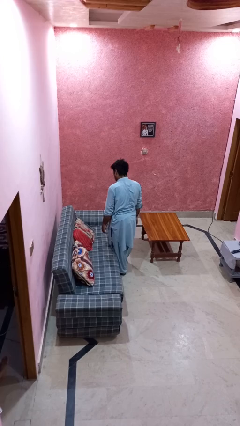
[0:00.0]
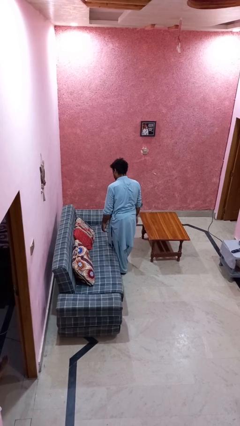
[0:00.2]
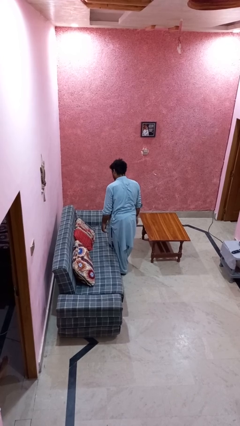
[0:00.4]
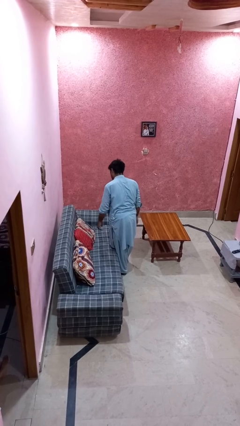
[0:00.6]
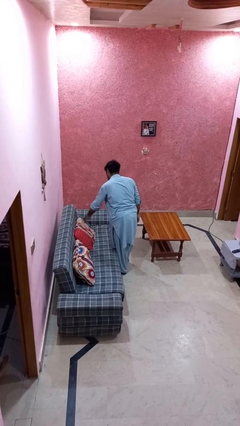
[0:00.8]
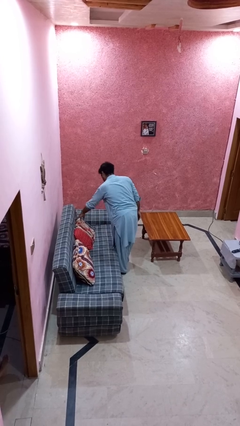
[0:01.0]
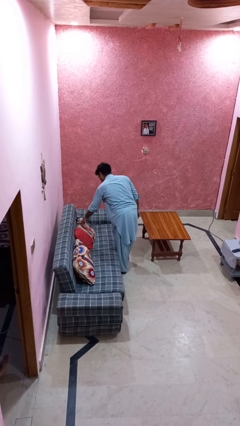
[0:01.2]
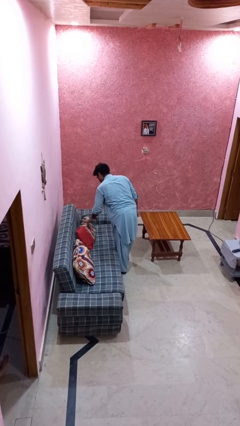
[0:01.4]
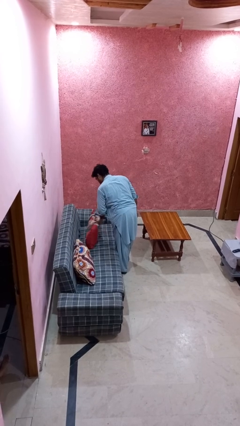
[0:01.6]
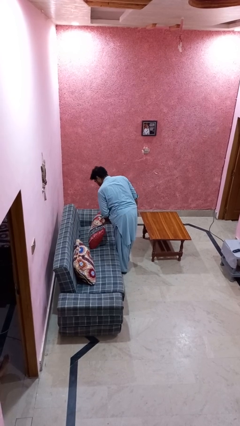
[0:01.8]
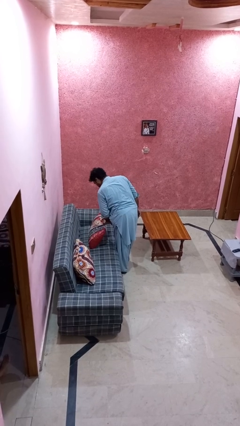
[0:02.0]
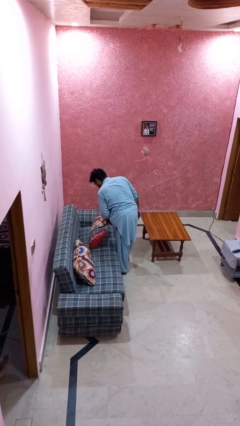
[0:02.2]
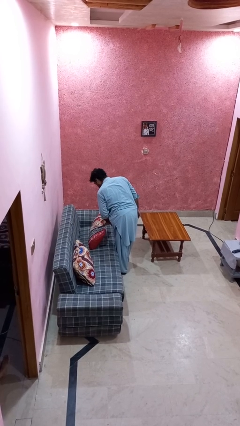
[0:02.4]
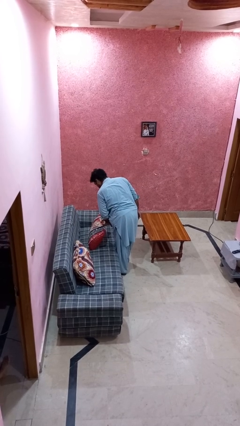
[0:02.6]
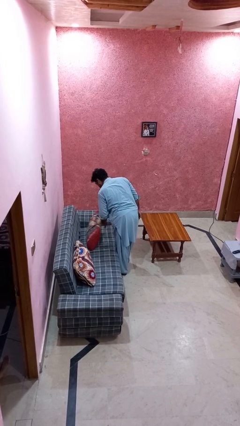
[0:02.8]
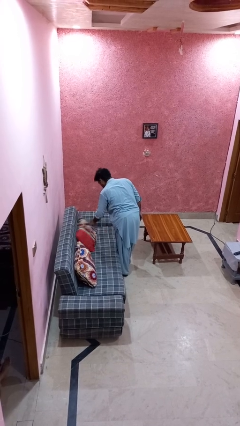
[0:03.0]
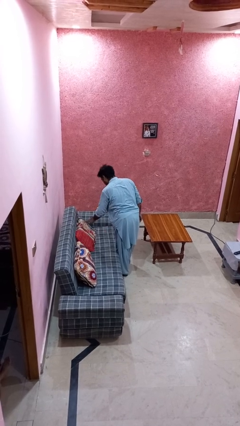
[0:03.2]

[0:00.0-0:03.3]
person searches in couch

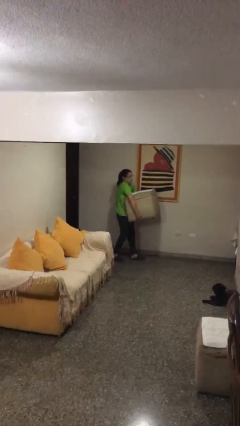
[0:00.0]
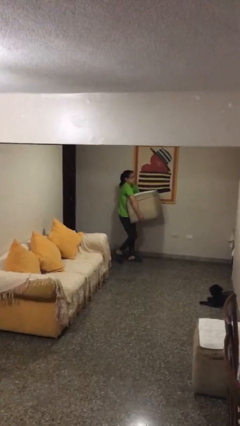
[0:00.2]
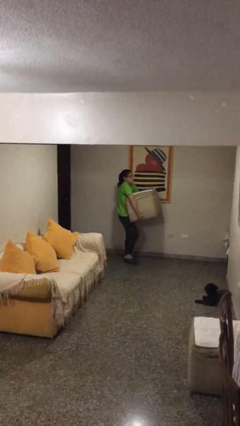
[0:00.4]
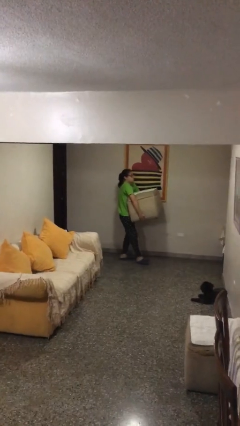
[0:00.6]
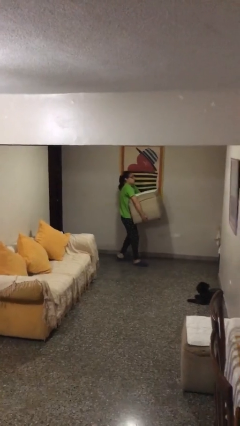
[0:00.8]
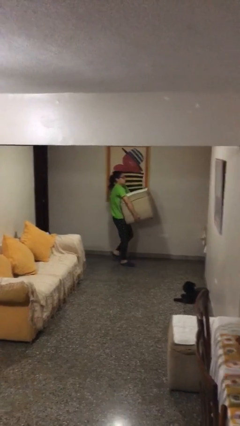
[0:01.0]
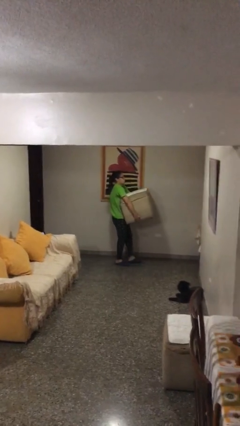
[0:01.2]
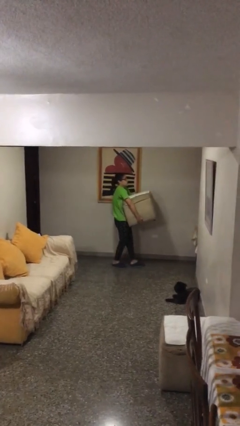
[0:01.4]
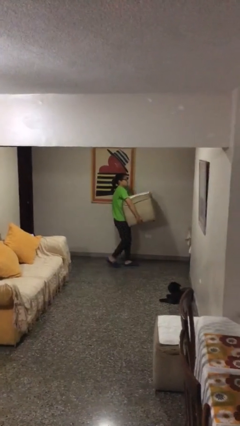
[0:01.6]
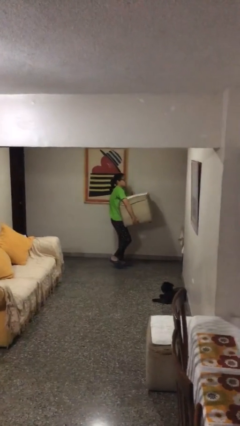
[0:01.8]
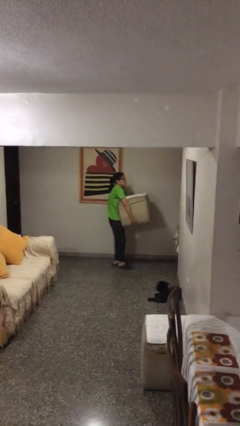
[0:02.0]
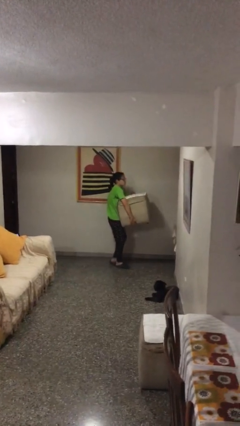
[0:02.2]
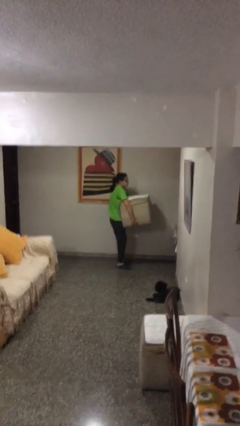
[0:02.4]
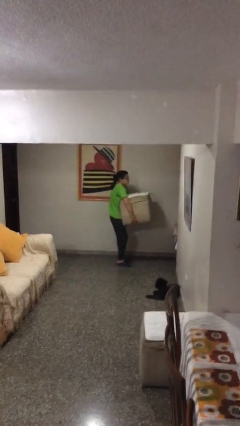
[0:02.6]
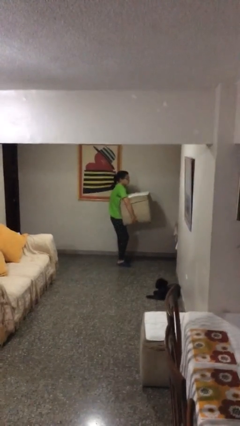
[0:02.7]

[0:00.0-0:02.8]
person carries heavy object

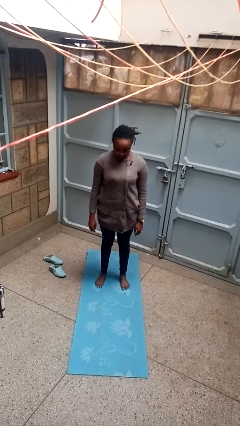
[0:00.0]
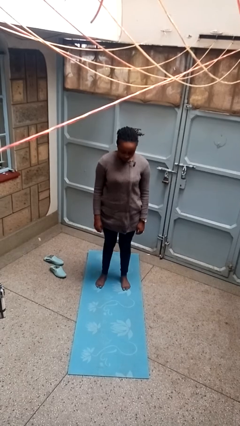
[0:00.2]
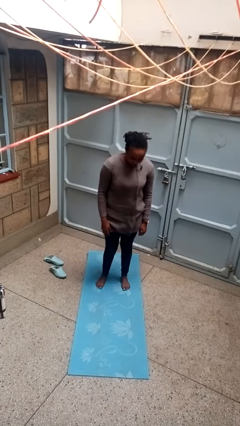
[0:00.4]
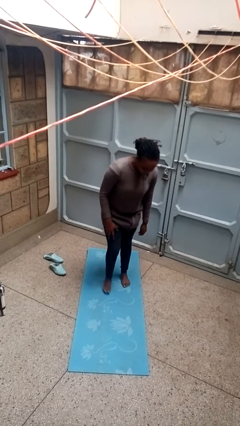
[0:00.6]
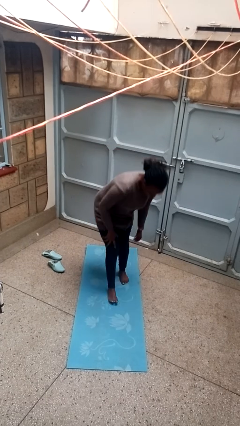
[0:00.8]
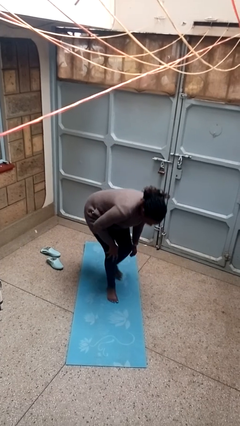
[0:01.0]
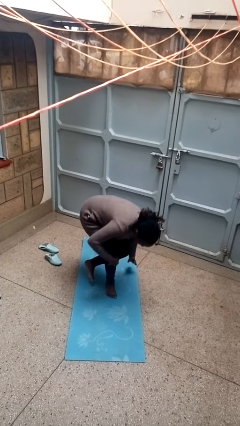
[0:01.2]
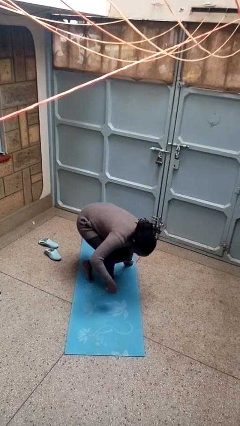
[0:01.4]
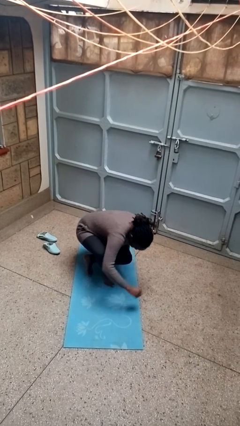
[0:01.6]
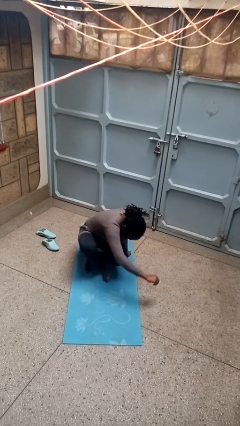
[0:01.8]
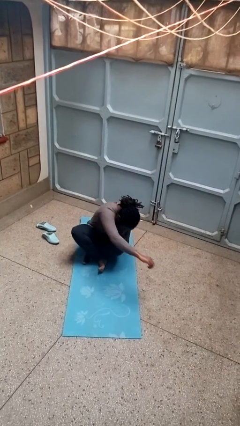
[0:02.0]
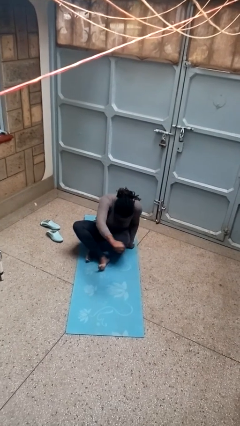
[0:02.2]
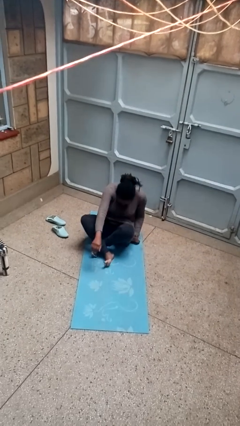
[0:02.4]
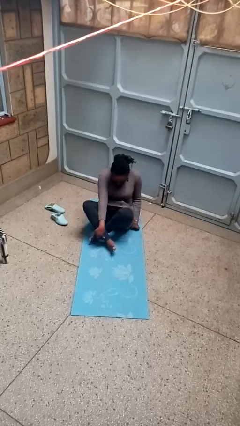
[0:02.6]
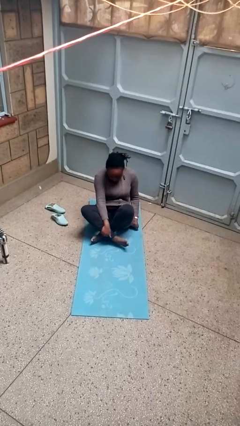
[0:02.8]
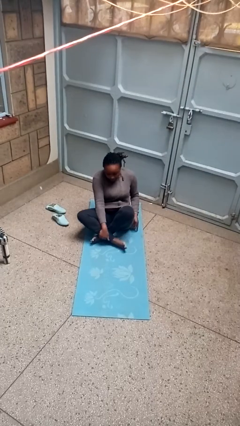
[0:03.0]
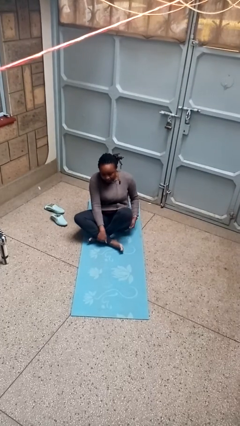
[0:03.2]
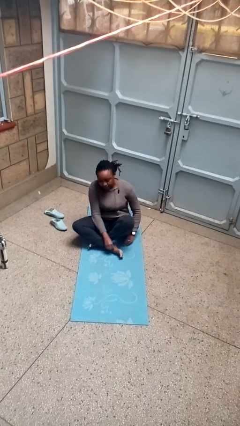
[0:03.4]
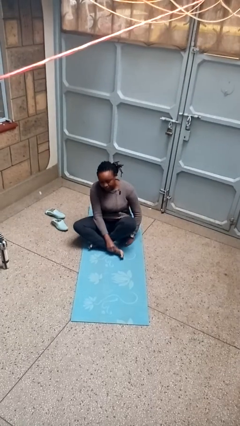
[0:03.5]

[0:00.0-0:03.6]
person sits crisscross

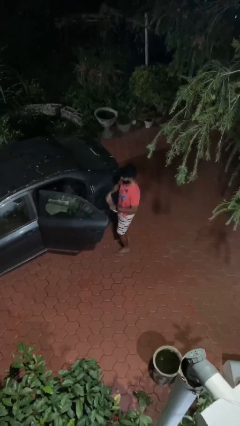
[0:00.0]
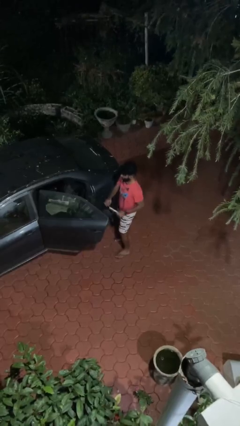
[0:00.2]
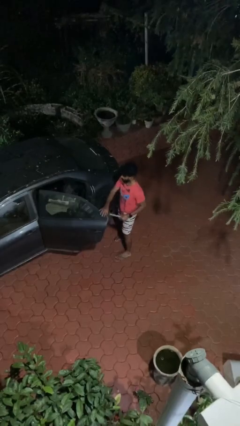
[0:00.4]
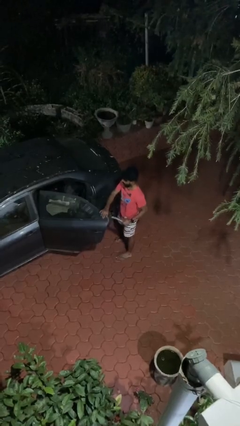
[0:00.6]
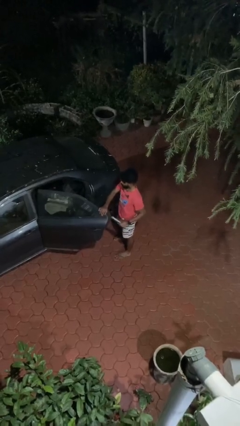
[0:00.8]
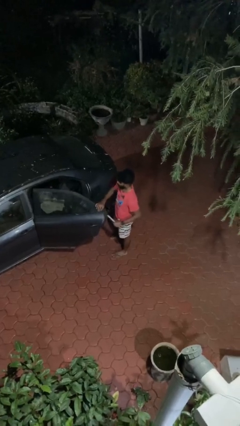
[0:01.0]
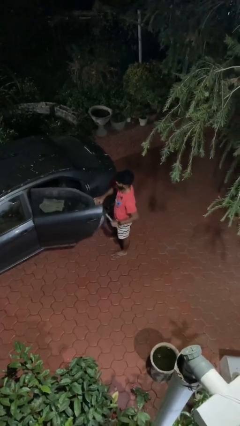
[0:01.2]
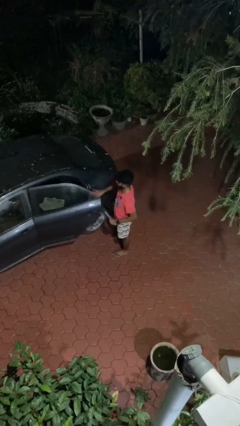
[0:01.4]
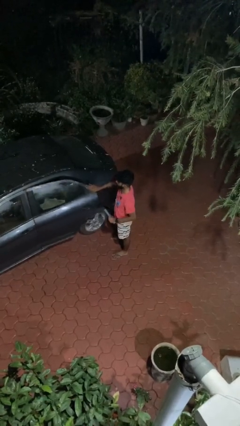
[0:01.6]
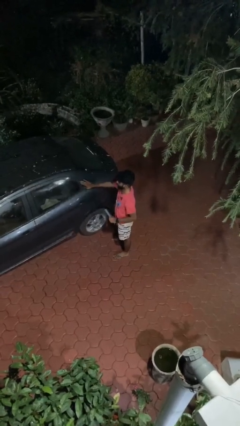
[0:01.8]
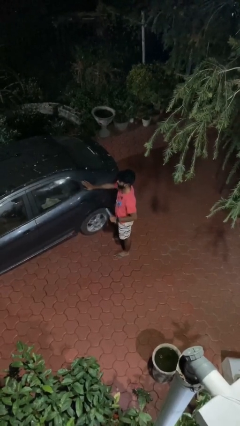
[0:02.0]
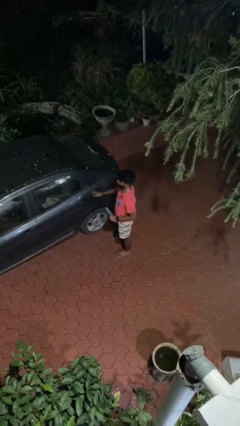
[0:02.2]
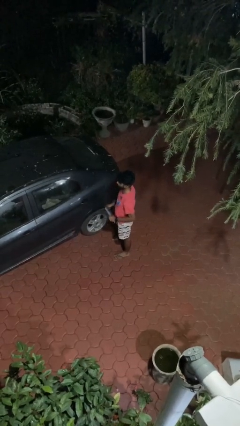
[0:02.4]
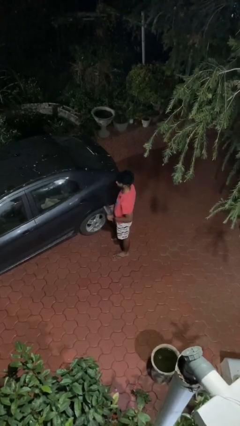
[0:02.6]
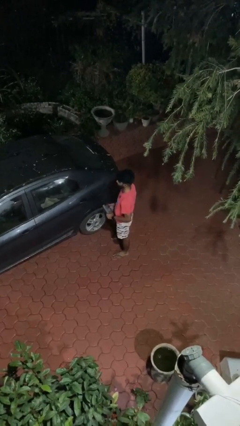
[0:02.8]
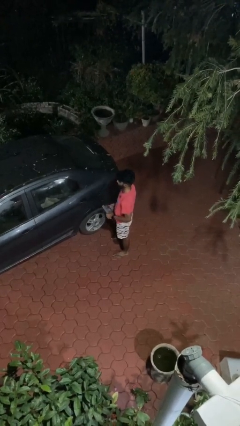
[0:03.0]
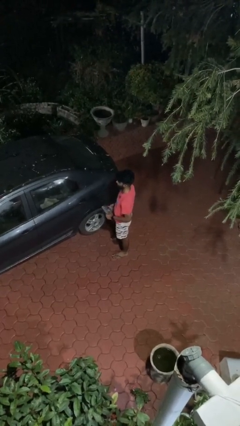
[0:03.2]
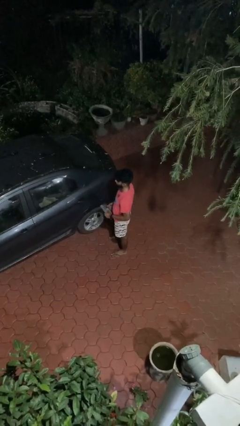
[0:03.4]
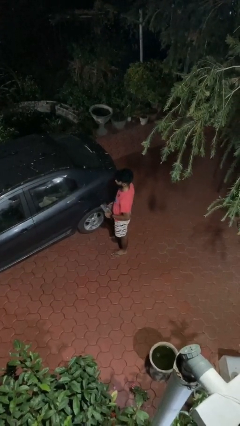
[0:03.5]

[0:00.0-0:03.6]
person closes car door

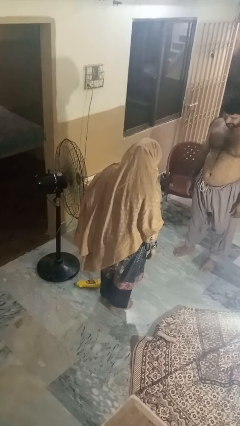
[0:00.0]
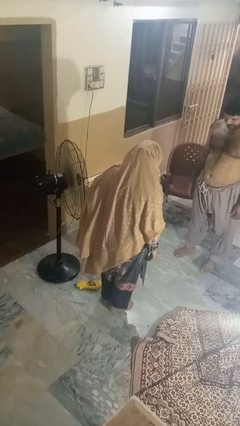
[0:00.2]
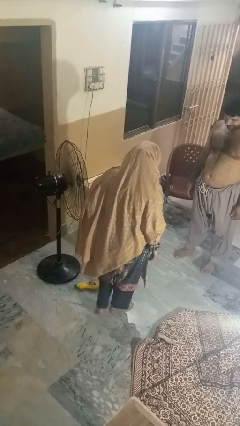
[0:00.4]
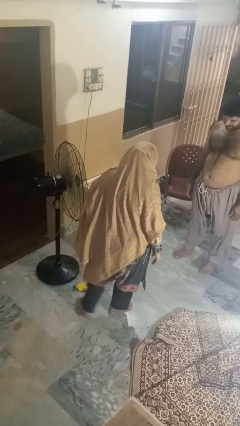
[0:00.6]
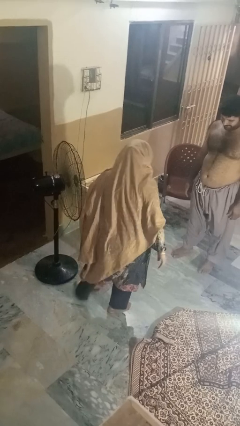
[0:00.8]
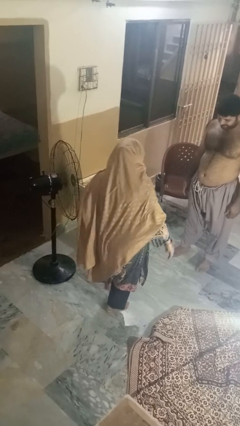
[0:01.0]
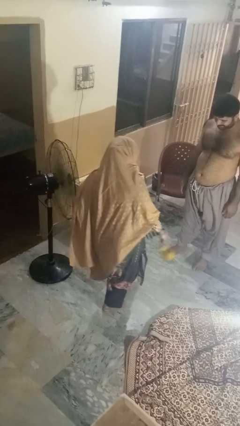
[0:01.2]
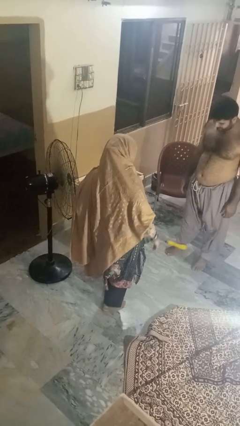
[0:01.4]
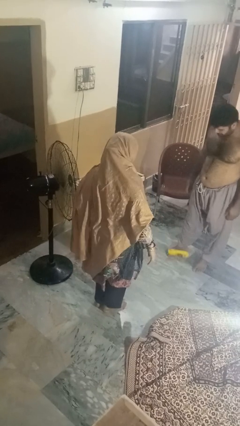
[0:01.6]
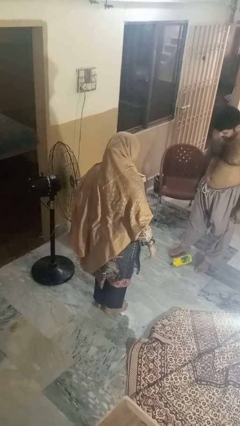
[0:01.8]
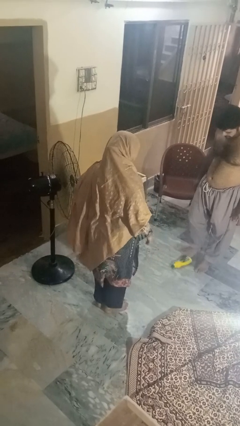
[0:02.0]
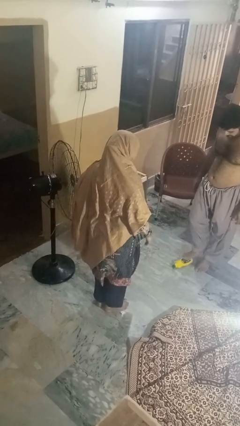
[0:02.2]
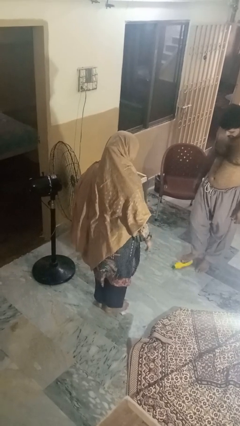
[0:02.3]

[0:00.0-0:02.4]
person kicks object to person

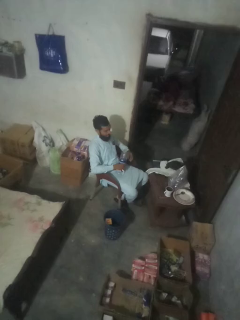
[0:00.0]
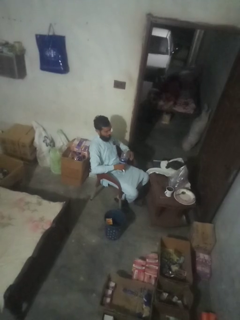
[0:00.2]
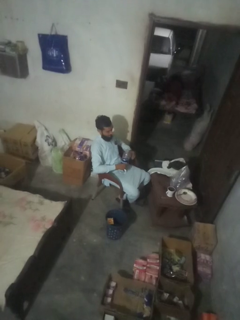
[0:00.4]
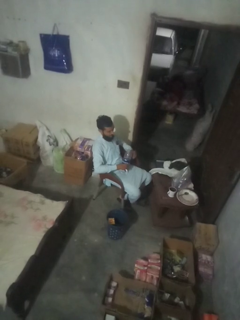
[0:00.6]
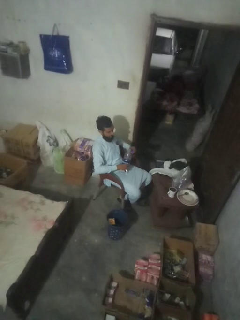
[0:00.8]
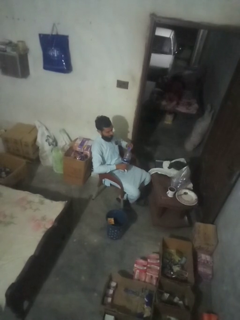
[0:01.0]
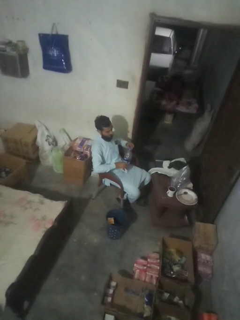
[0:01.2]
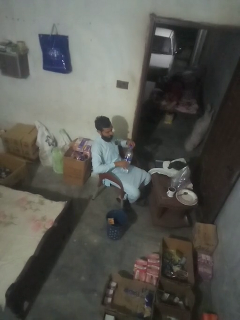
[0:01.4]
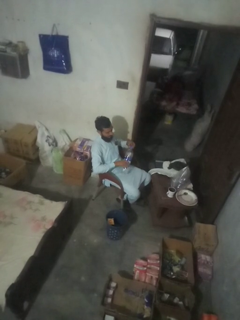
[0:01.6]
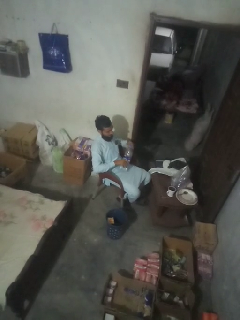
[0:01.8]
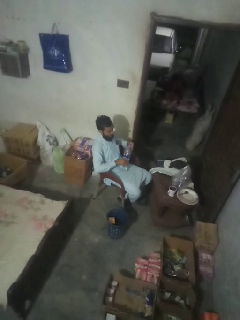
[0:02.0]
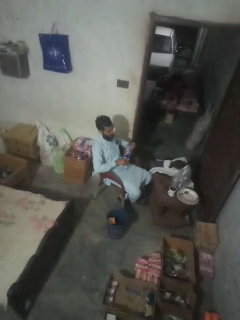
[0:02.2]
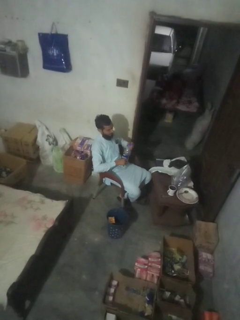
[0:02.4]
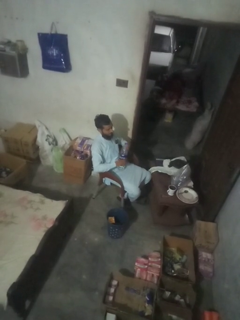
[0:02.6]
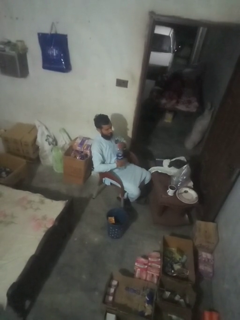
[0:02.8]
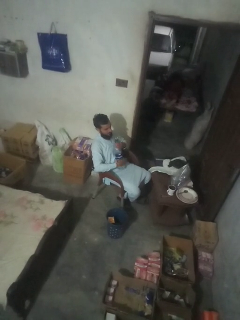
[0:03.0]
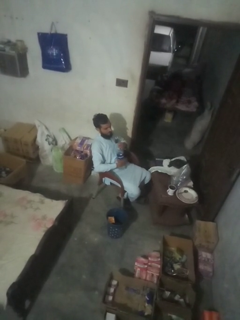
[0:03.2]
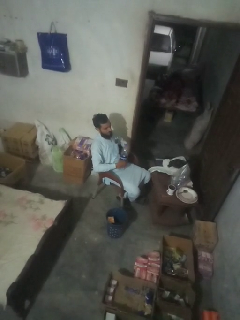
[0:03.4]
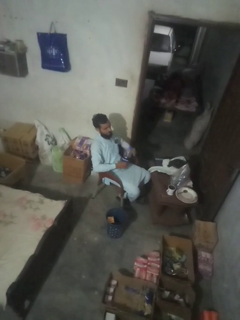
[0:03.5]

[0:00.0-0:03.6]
person screws lid to bottle
